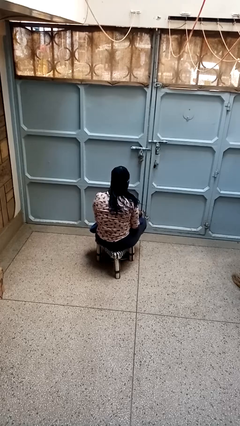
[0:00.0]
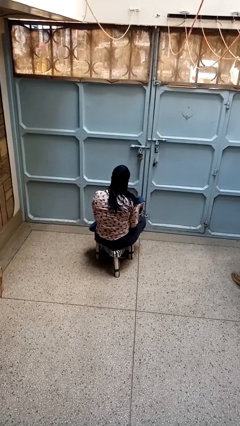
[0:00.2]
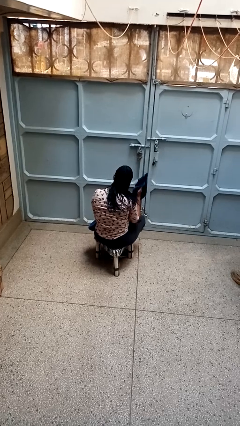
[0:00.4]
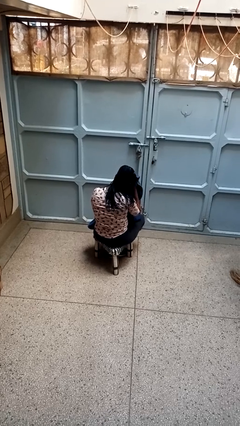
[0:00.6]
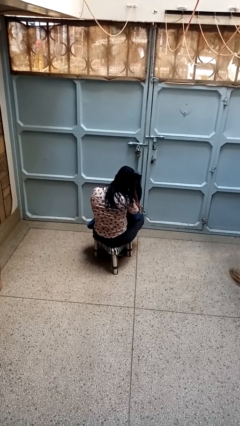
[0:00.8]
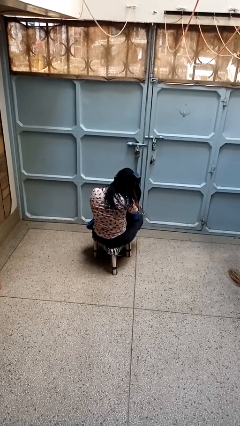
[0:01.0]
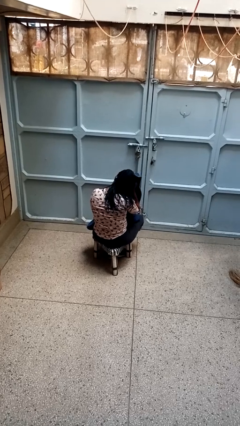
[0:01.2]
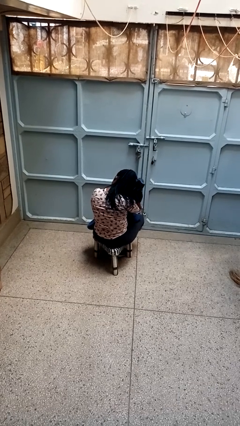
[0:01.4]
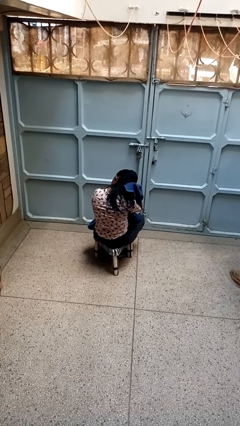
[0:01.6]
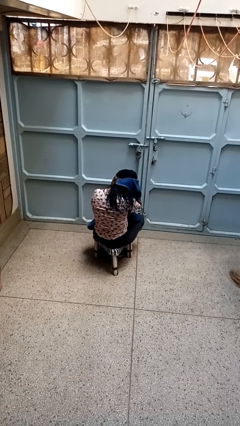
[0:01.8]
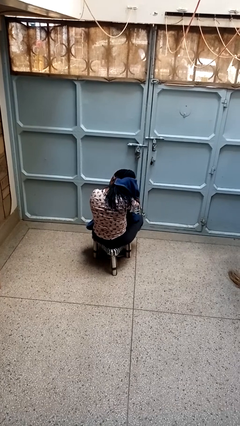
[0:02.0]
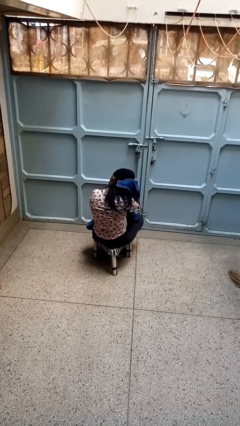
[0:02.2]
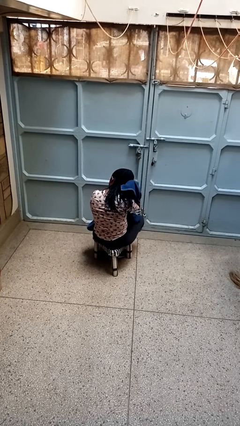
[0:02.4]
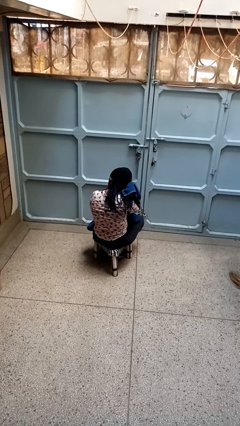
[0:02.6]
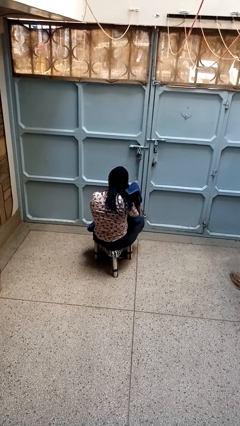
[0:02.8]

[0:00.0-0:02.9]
person dries hair with towel

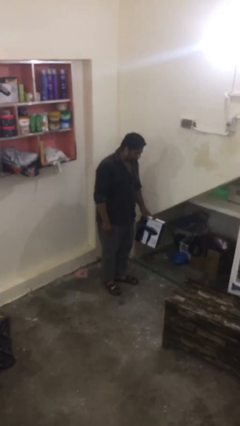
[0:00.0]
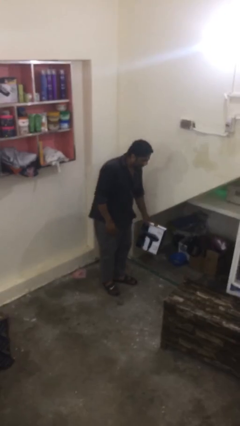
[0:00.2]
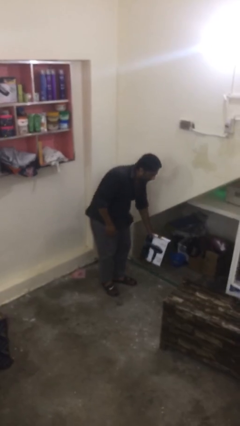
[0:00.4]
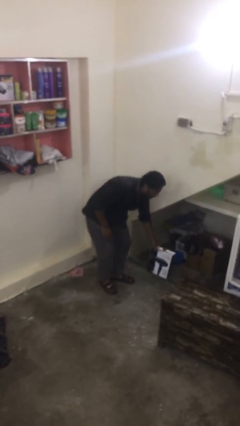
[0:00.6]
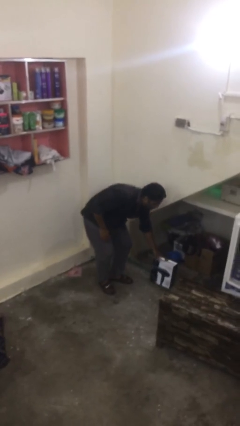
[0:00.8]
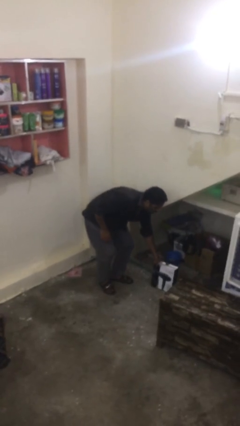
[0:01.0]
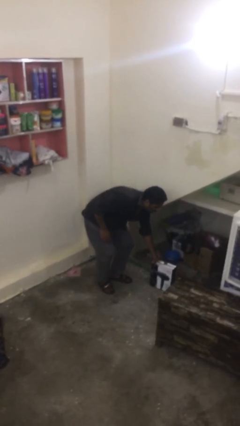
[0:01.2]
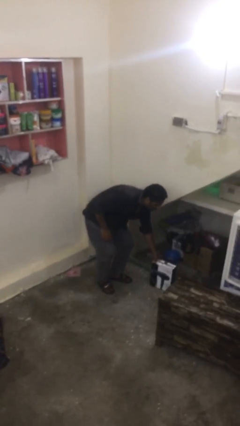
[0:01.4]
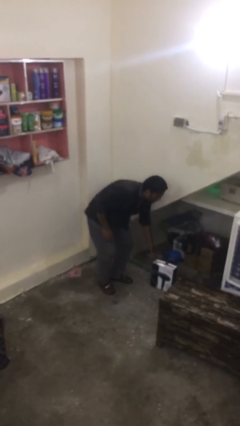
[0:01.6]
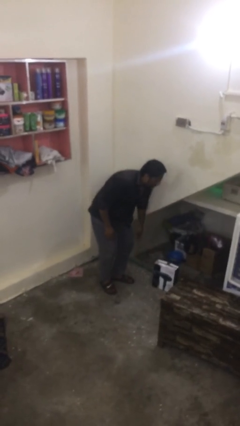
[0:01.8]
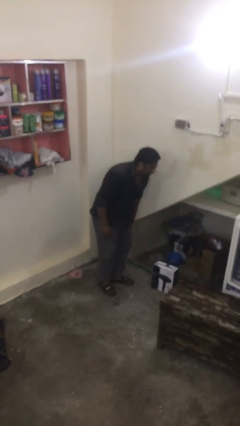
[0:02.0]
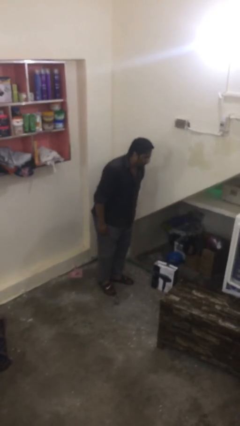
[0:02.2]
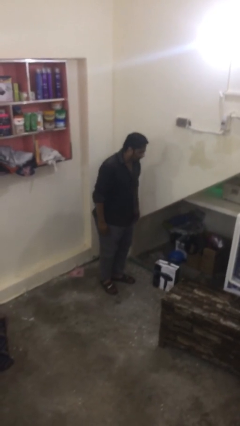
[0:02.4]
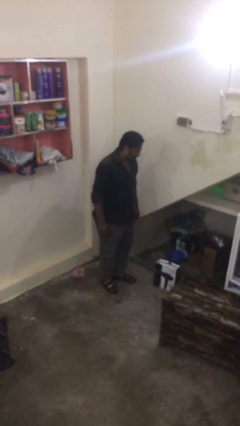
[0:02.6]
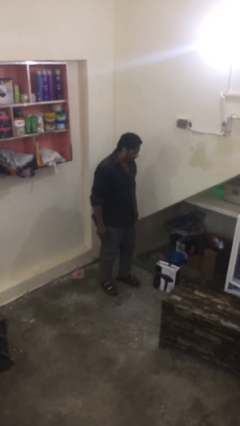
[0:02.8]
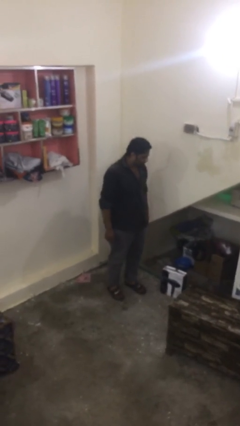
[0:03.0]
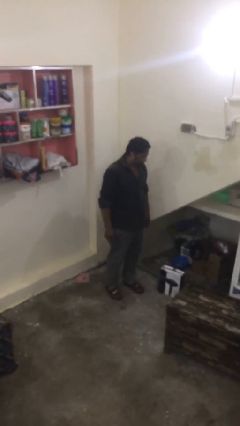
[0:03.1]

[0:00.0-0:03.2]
person puts down object on floor

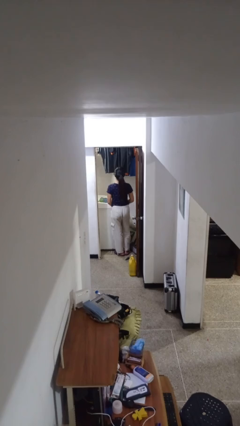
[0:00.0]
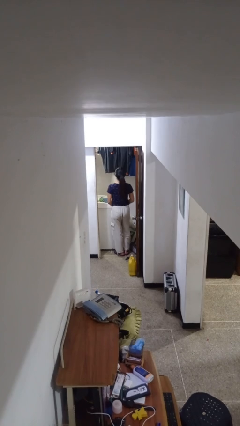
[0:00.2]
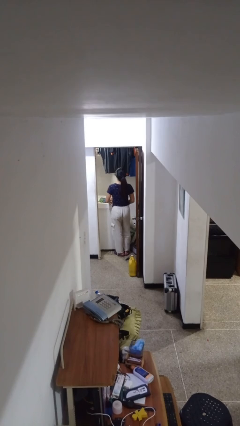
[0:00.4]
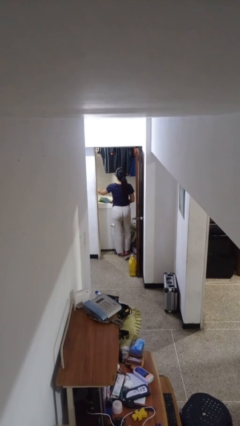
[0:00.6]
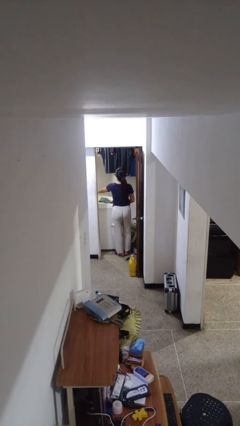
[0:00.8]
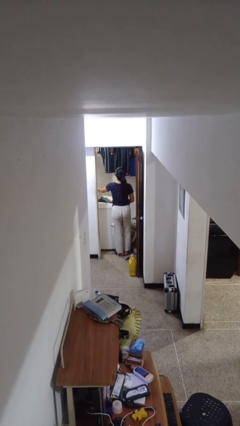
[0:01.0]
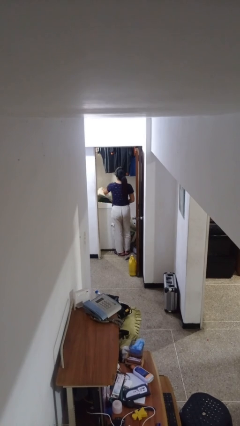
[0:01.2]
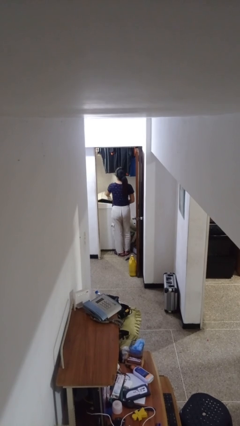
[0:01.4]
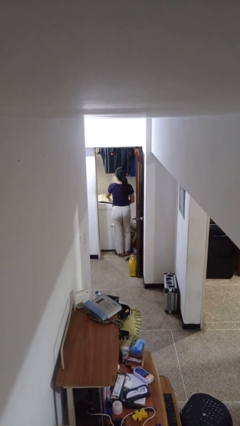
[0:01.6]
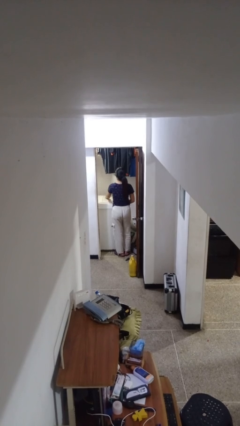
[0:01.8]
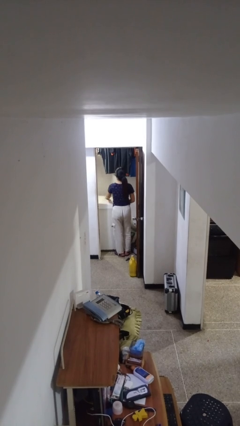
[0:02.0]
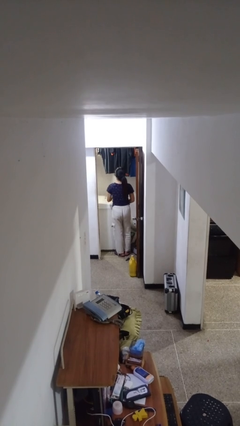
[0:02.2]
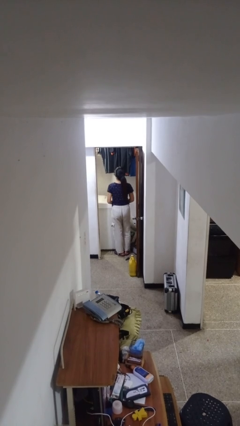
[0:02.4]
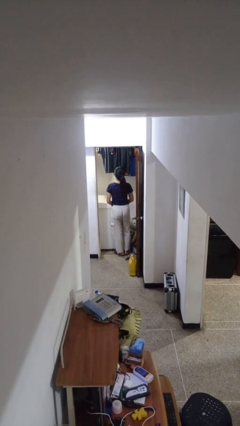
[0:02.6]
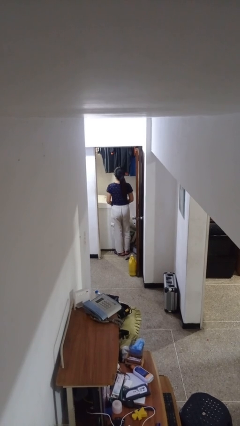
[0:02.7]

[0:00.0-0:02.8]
person closes clothes washer

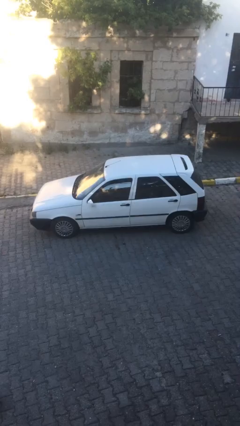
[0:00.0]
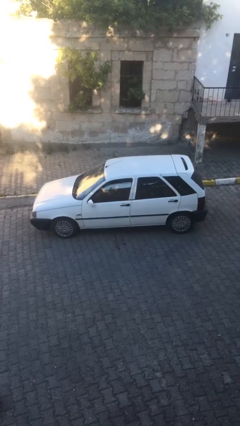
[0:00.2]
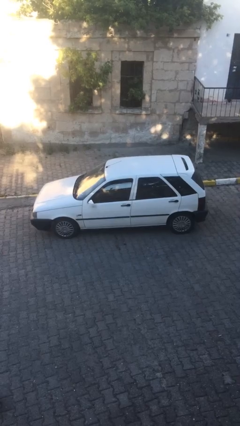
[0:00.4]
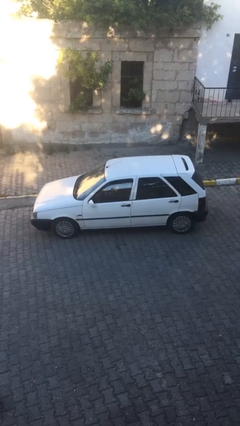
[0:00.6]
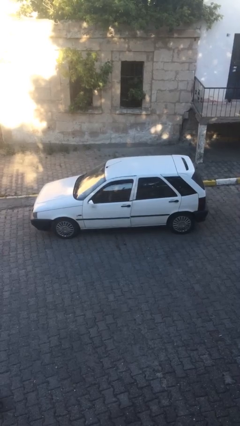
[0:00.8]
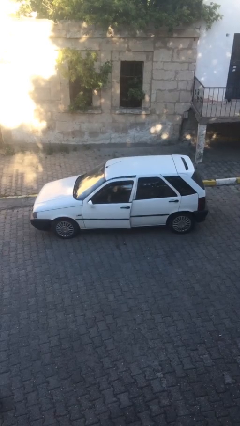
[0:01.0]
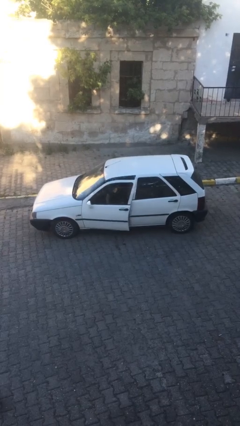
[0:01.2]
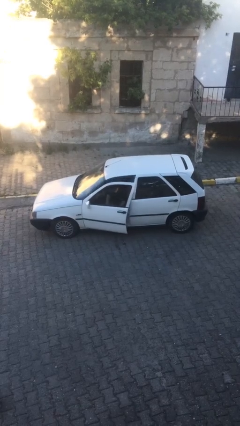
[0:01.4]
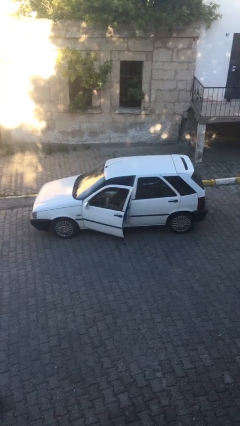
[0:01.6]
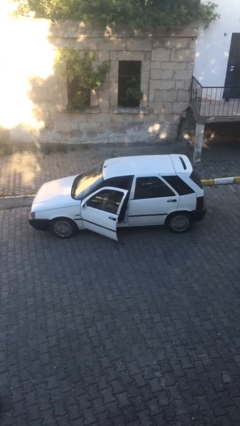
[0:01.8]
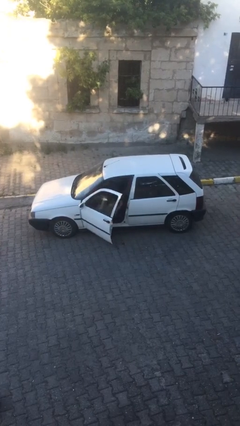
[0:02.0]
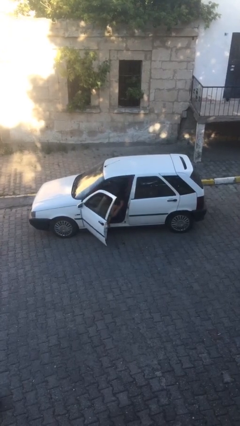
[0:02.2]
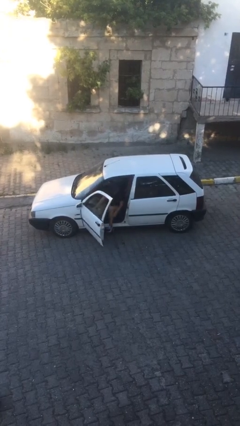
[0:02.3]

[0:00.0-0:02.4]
person opens car door

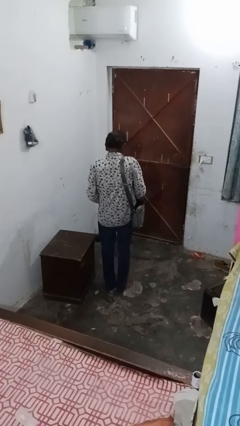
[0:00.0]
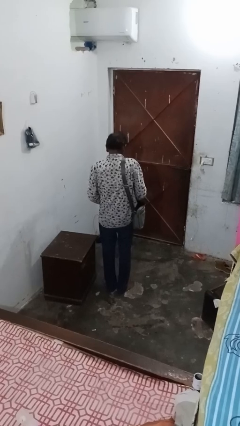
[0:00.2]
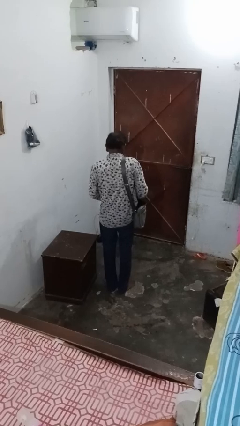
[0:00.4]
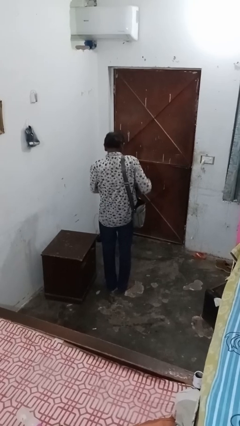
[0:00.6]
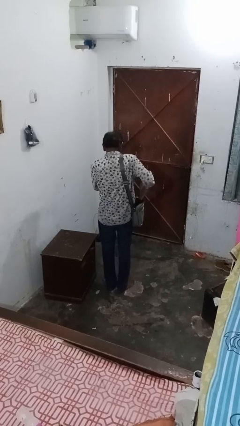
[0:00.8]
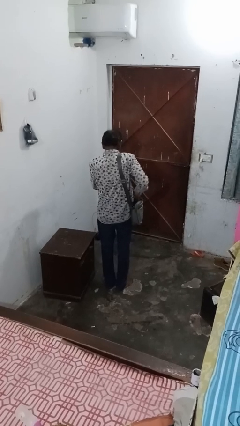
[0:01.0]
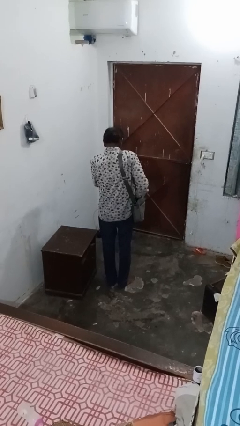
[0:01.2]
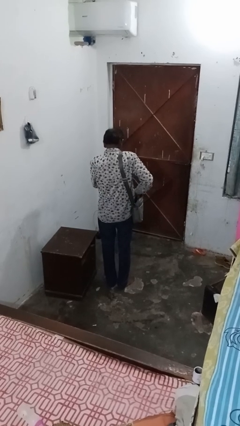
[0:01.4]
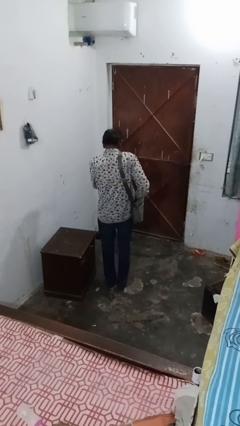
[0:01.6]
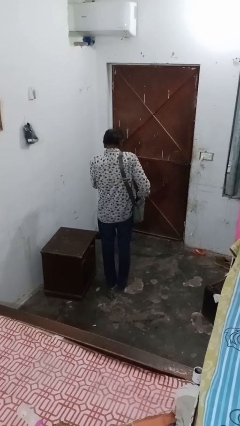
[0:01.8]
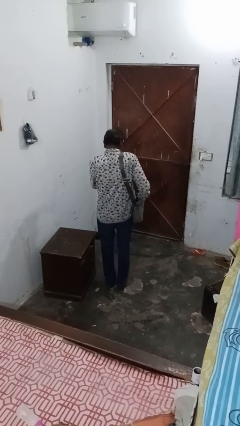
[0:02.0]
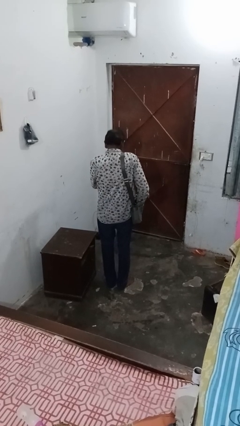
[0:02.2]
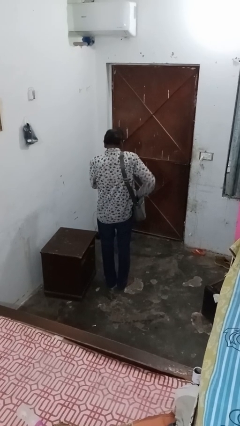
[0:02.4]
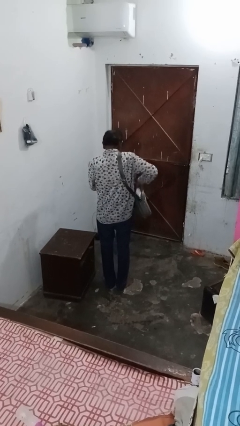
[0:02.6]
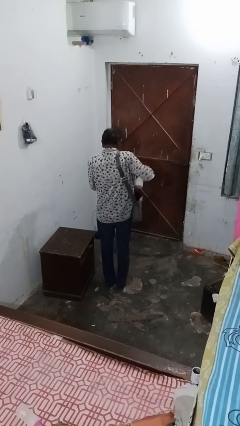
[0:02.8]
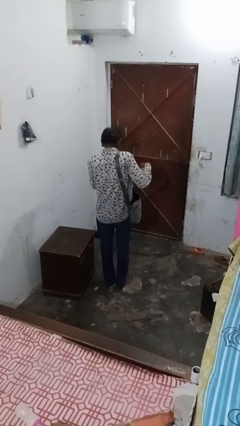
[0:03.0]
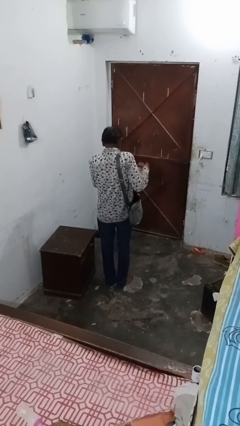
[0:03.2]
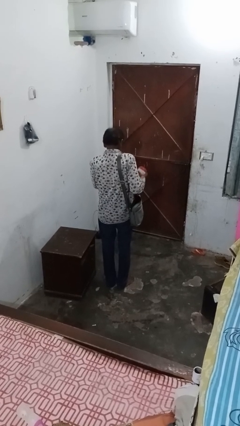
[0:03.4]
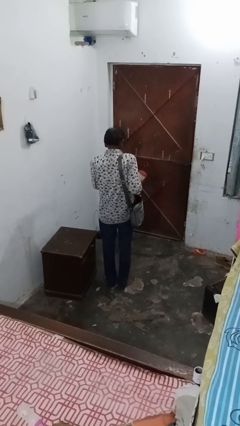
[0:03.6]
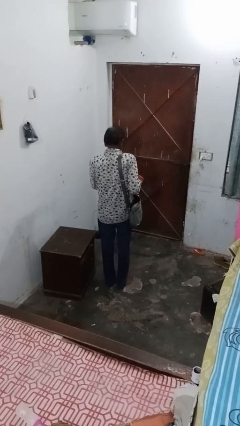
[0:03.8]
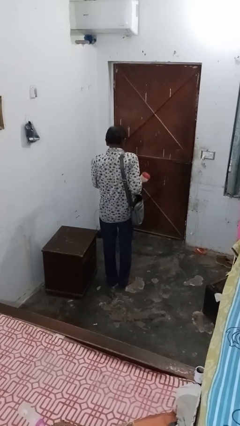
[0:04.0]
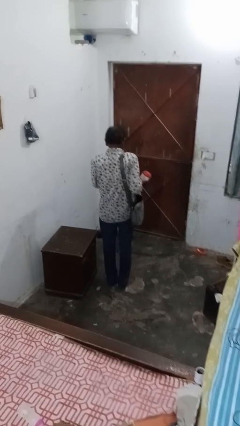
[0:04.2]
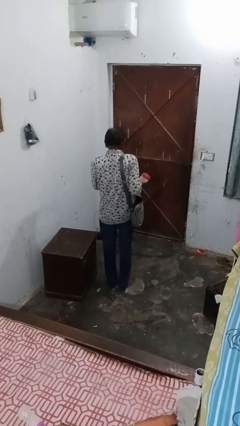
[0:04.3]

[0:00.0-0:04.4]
person takes object from bag

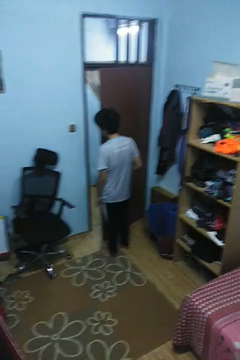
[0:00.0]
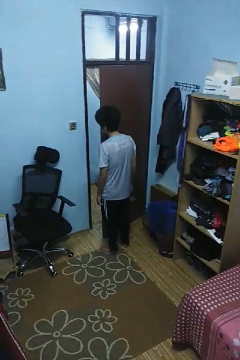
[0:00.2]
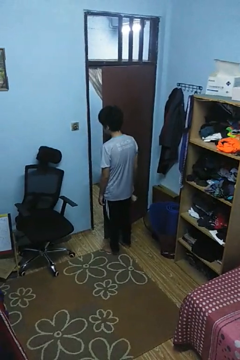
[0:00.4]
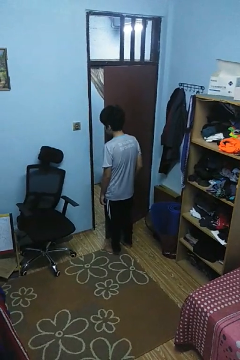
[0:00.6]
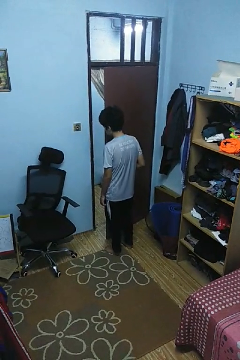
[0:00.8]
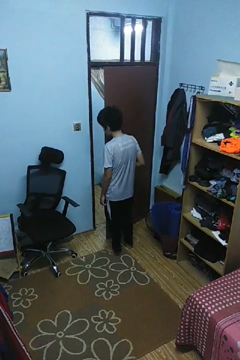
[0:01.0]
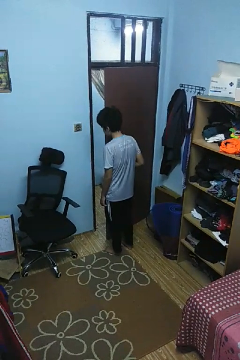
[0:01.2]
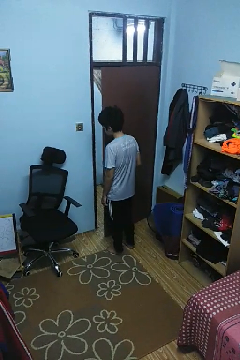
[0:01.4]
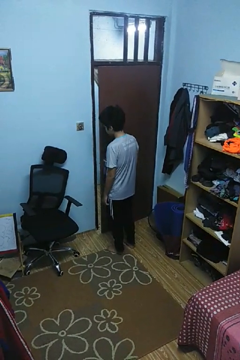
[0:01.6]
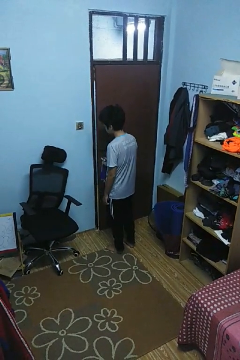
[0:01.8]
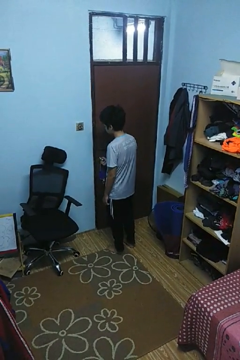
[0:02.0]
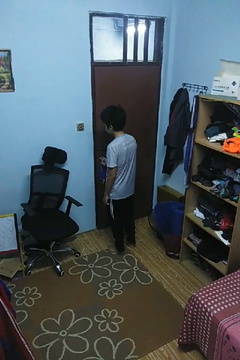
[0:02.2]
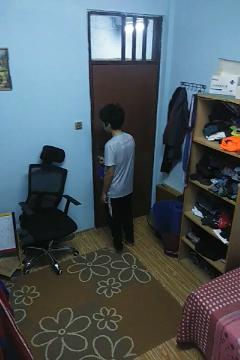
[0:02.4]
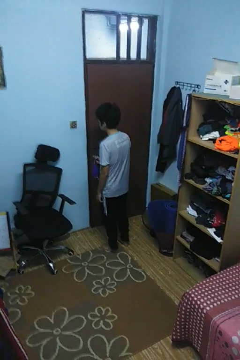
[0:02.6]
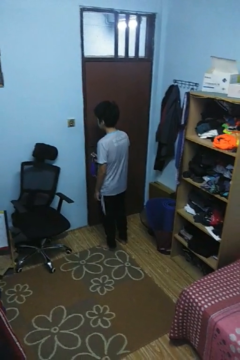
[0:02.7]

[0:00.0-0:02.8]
person closes facility door
